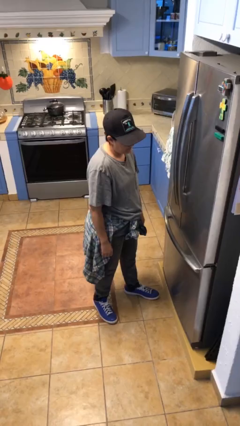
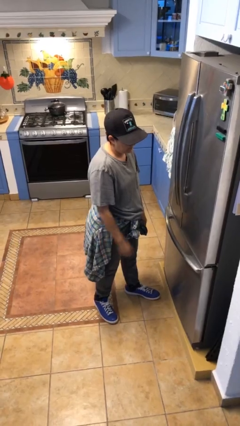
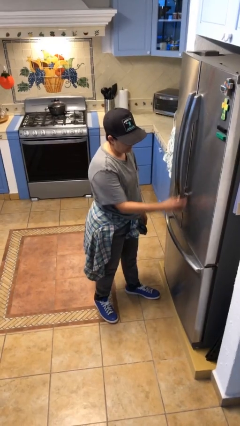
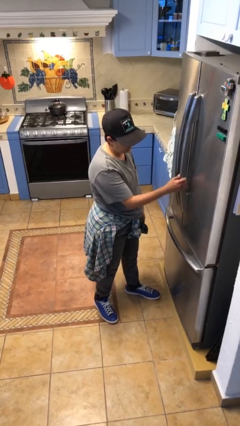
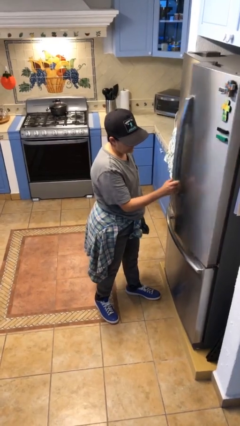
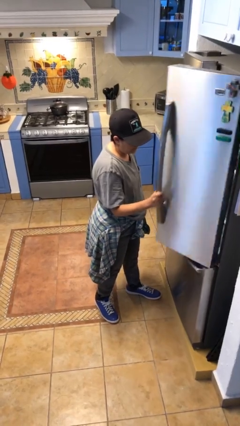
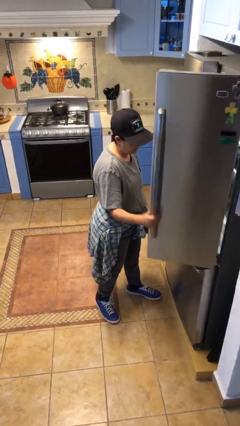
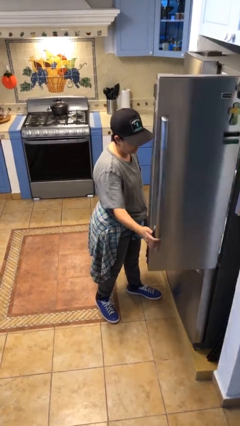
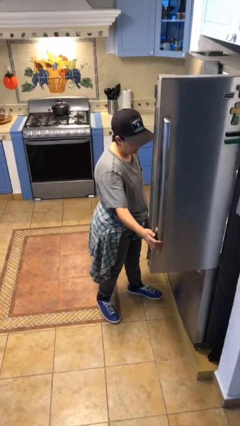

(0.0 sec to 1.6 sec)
person opens refrigerator

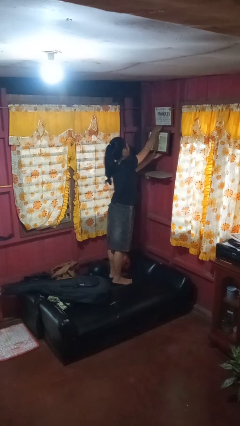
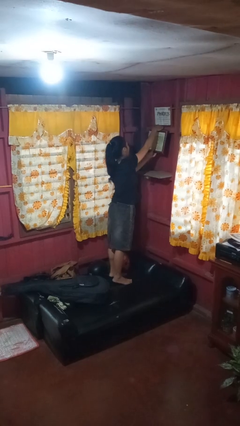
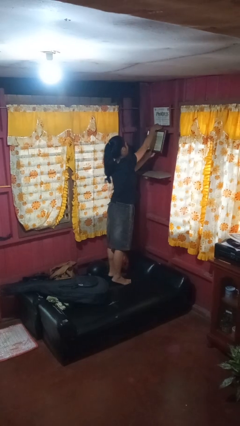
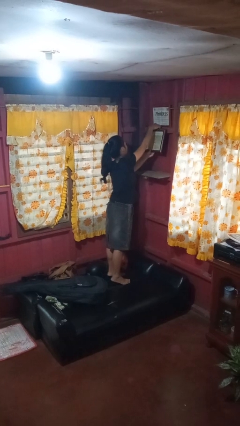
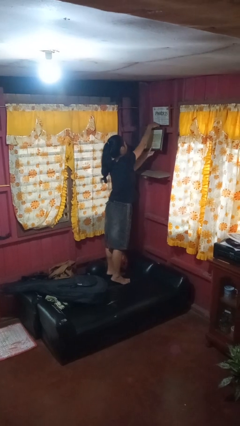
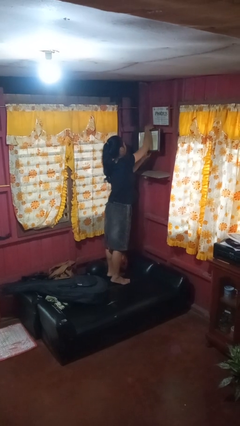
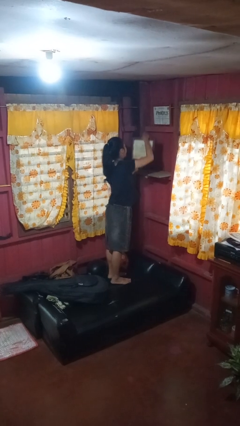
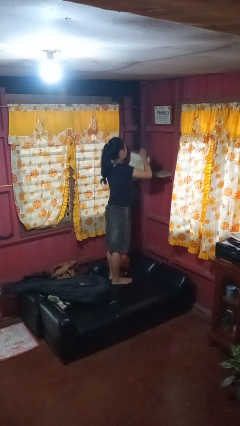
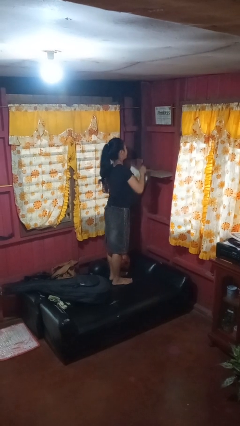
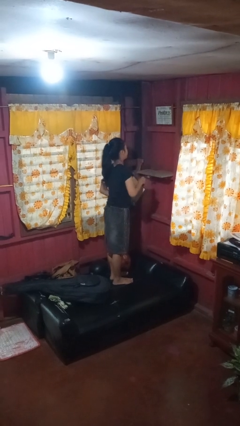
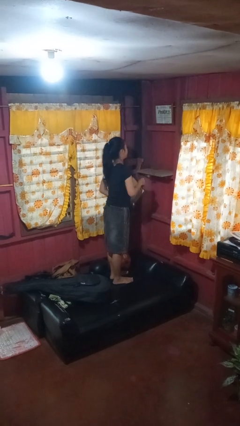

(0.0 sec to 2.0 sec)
person takes down picture frame

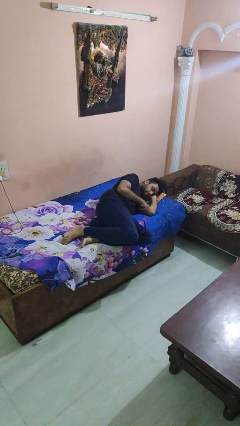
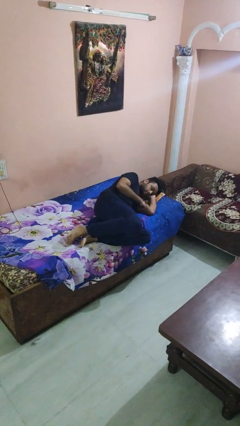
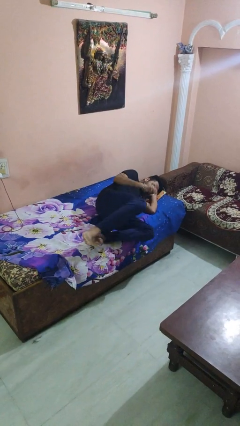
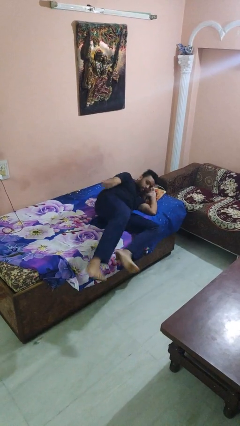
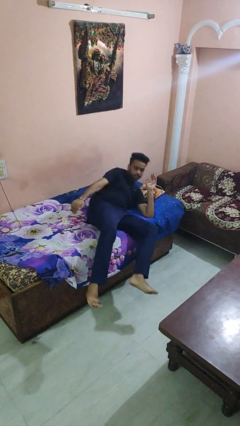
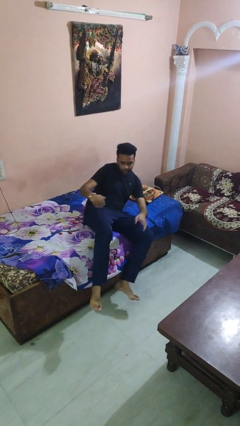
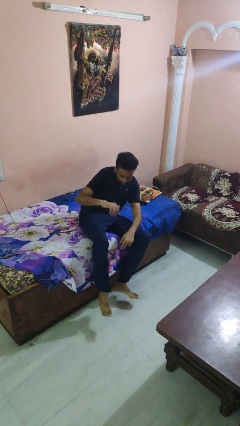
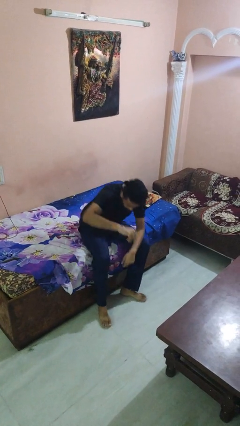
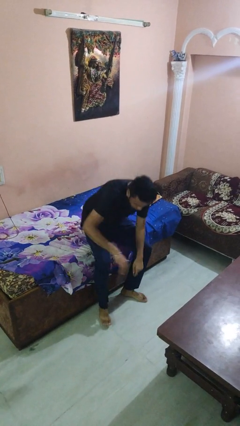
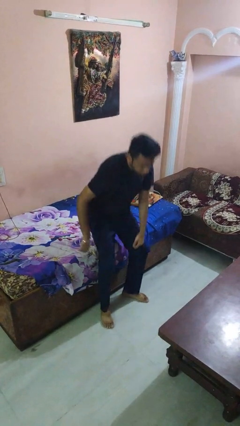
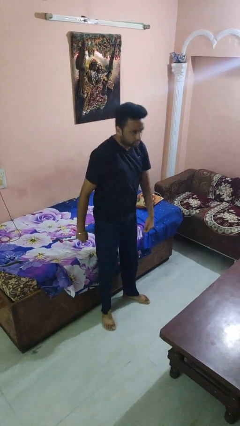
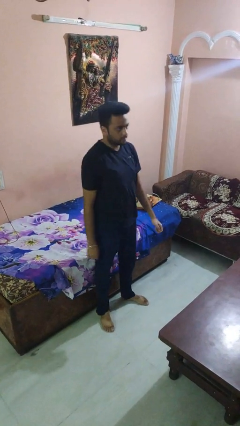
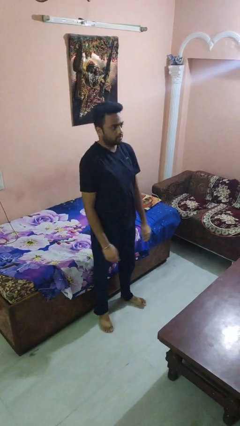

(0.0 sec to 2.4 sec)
person stands up

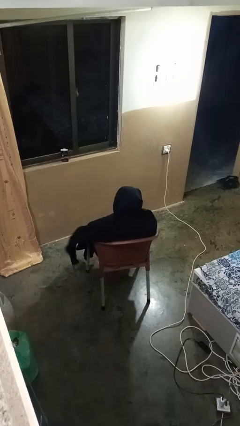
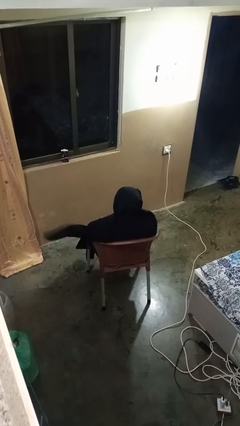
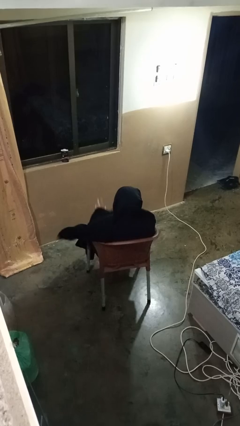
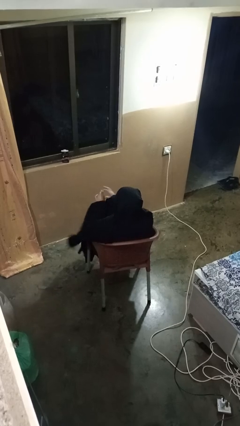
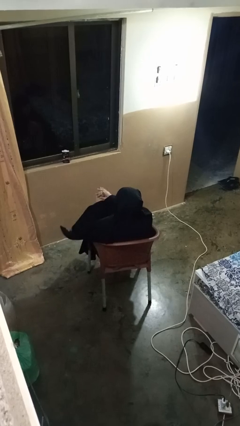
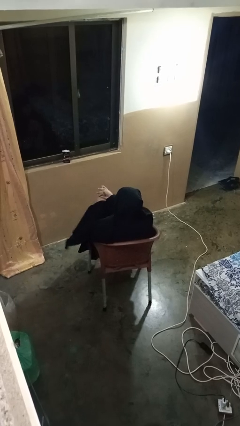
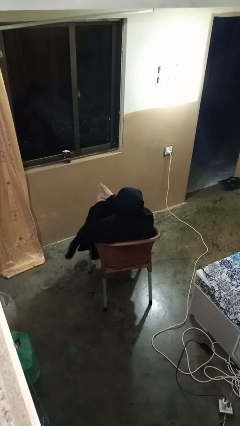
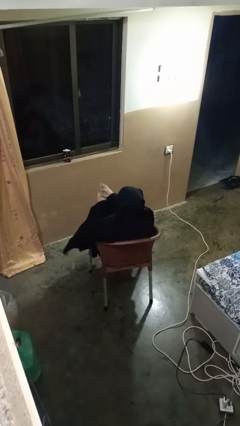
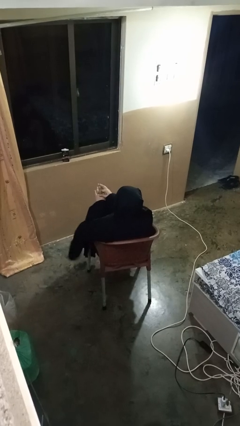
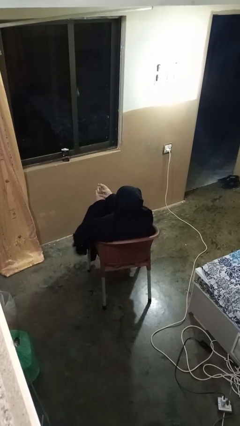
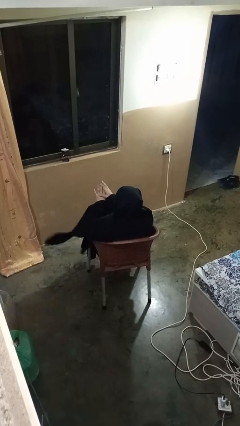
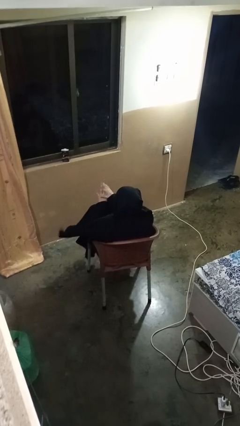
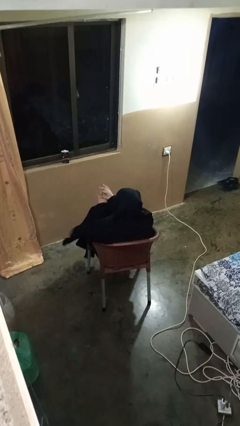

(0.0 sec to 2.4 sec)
person cracks knuckles

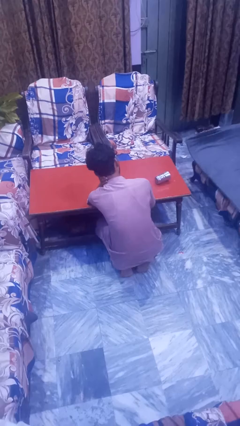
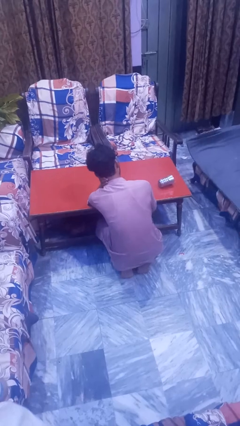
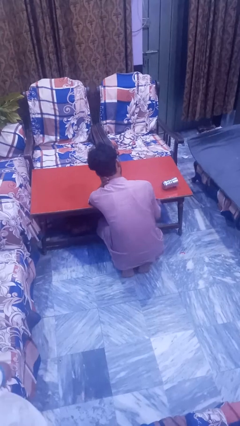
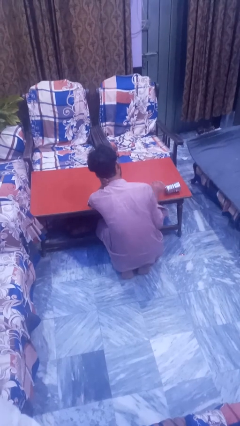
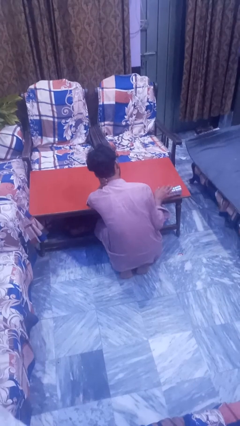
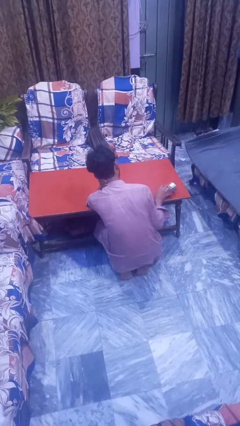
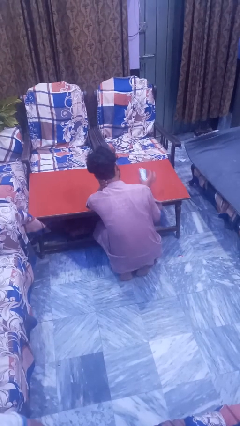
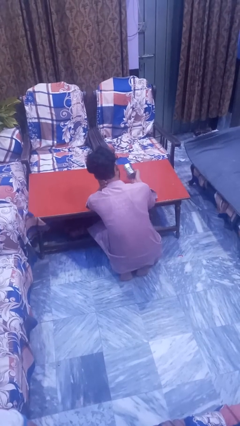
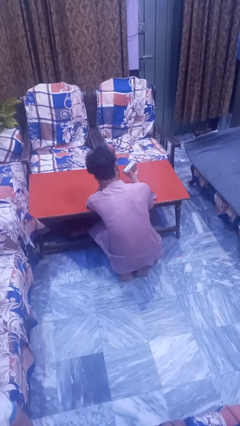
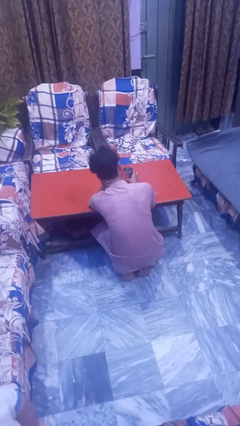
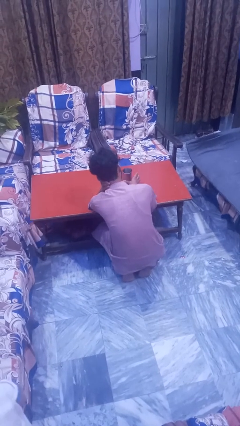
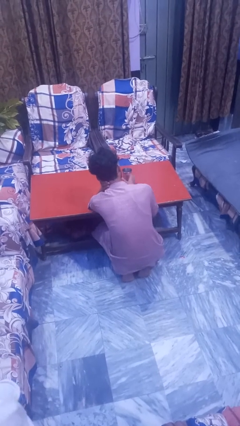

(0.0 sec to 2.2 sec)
person sets upright glass

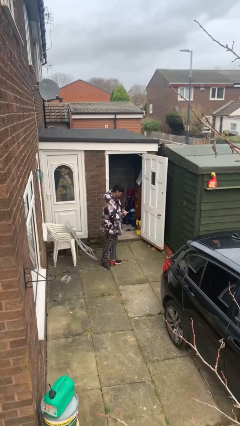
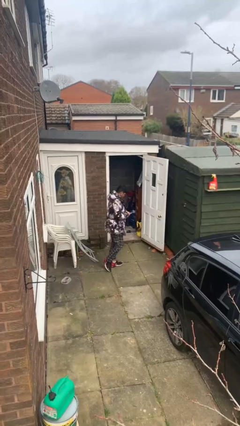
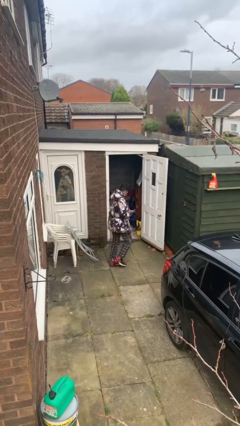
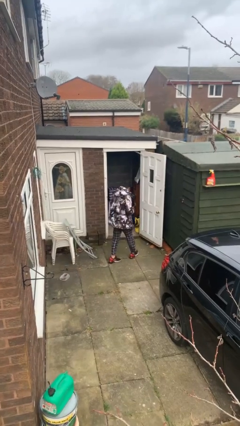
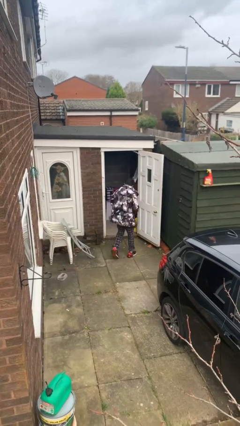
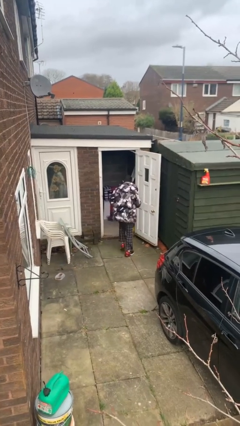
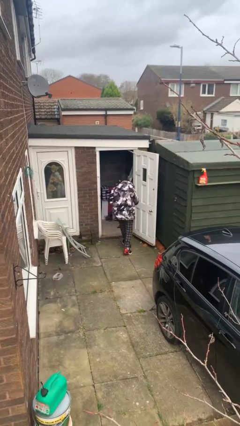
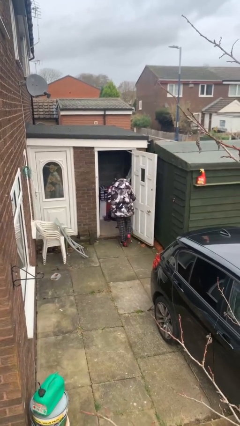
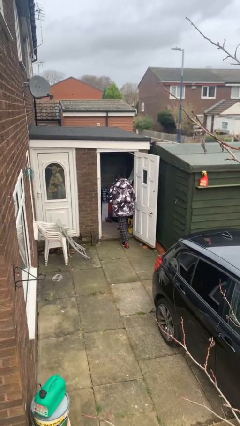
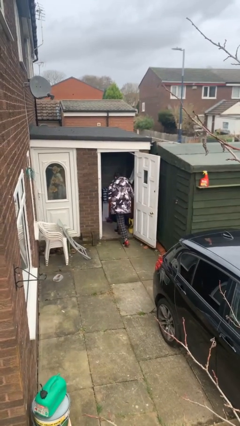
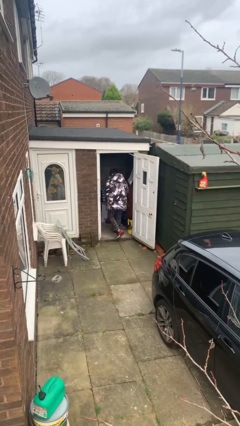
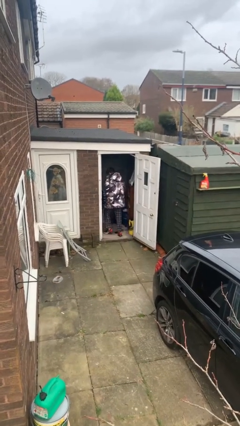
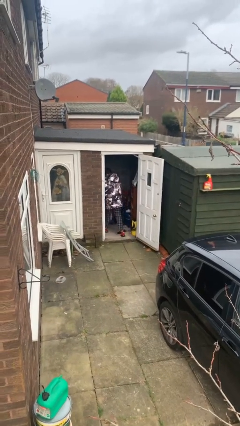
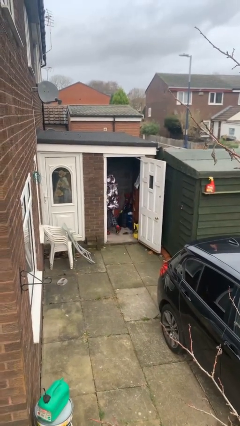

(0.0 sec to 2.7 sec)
person exits scene through structure

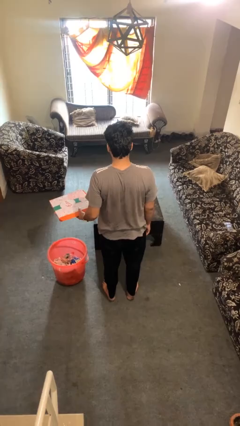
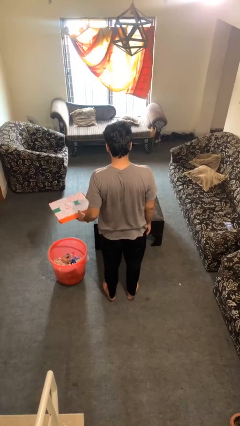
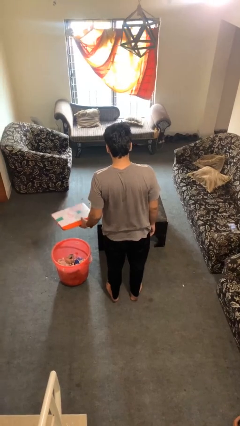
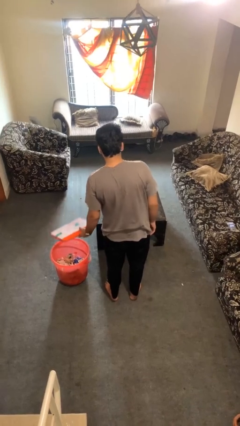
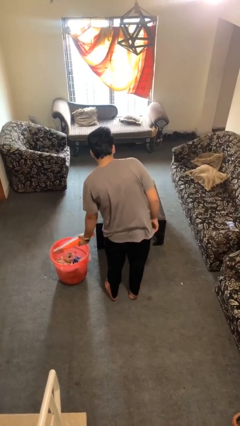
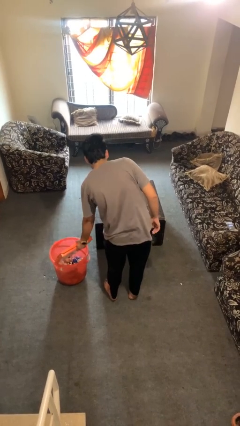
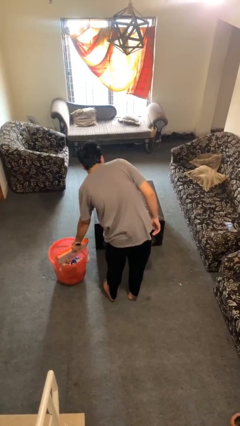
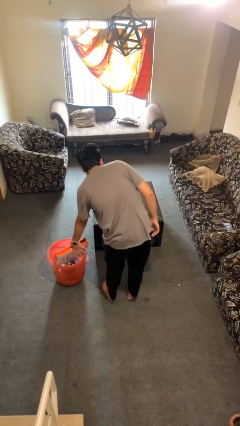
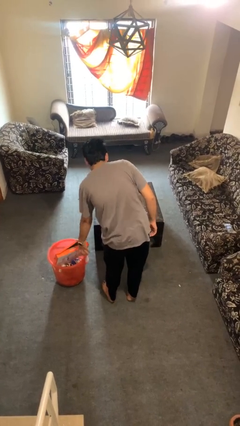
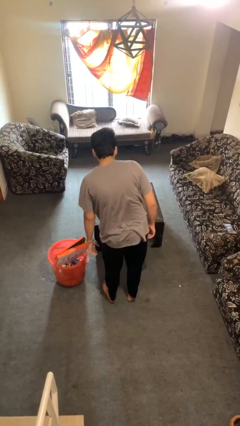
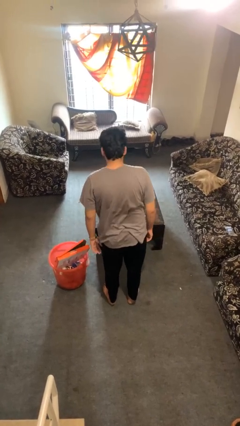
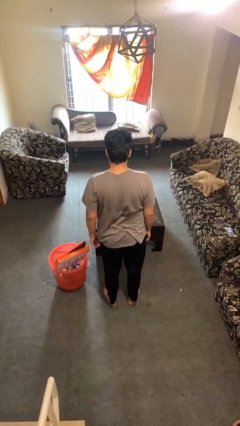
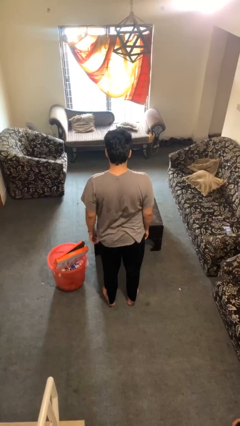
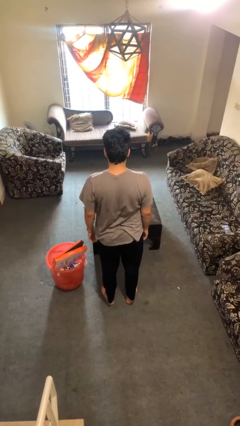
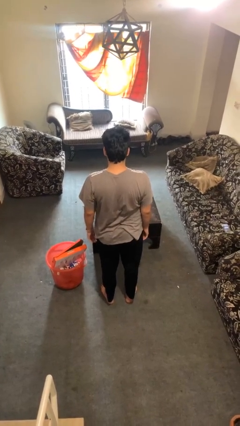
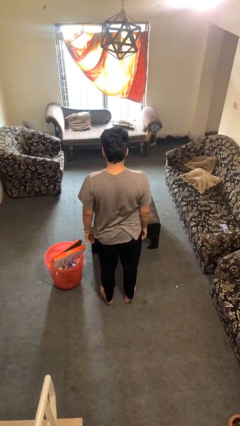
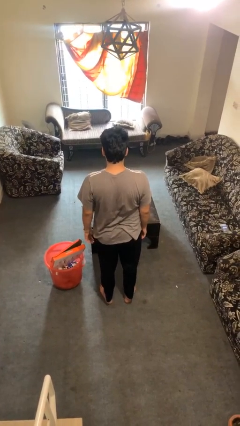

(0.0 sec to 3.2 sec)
person puts object into basket
